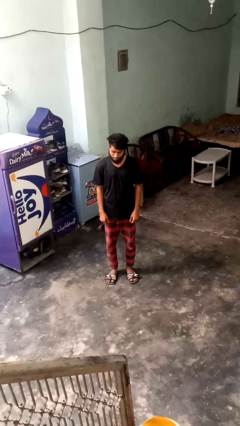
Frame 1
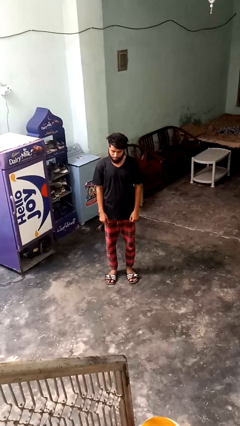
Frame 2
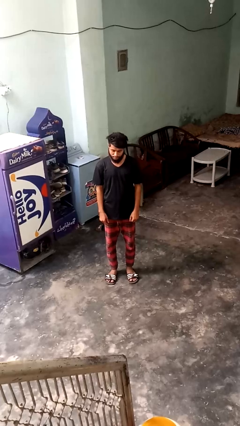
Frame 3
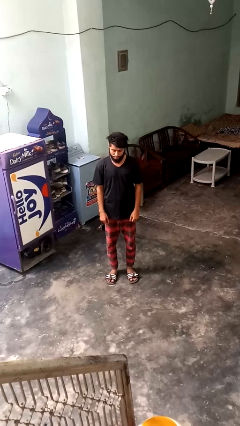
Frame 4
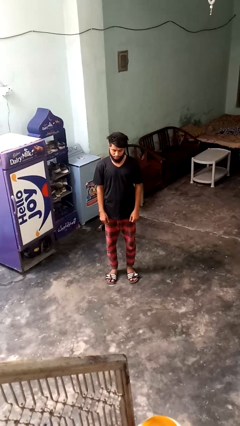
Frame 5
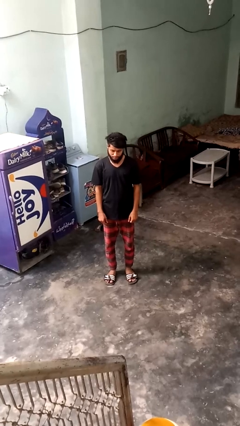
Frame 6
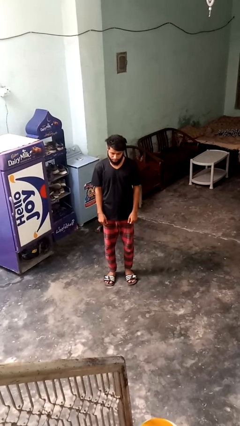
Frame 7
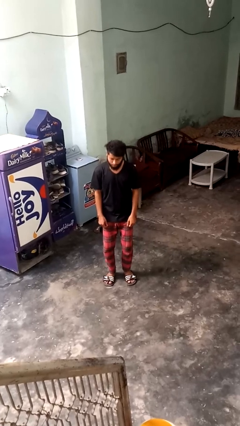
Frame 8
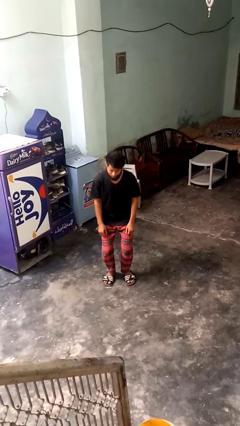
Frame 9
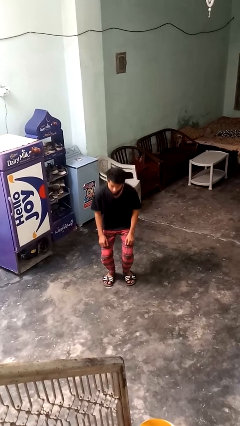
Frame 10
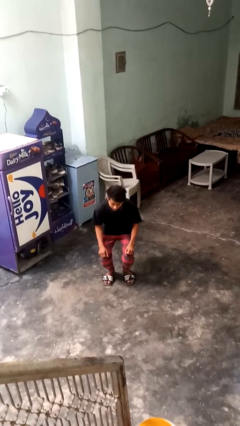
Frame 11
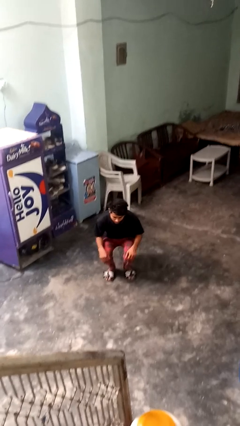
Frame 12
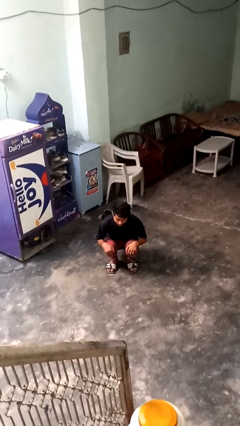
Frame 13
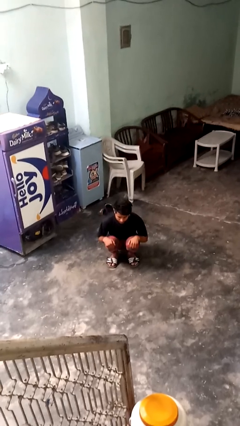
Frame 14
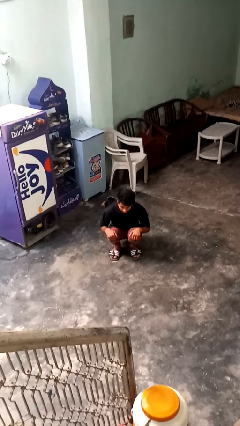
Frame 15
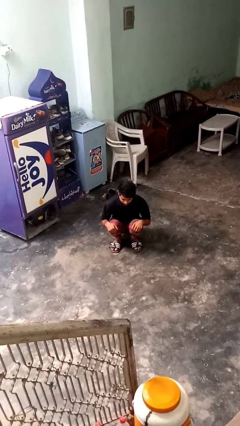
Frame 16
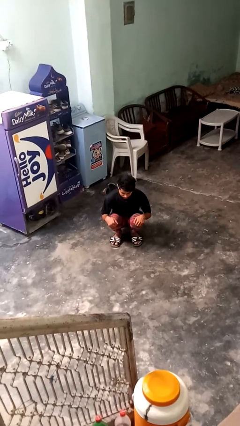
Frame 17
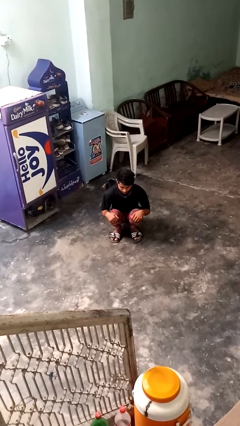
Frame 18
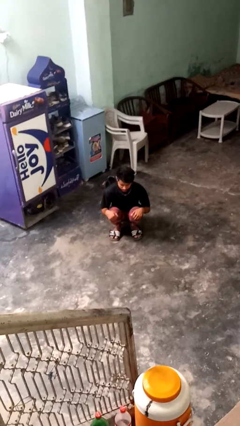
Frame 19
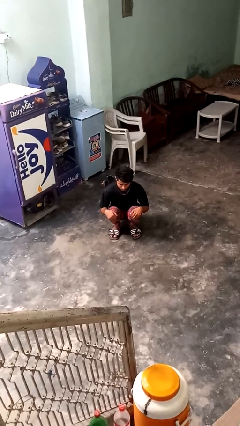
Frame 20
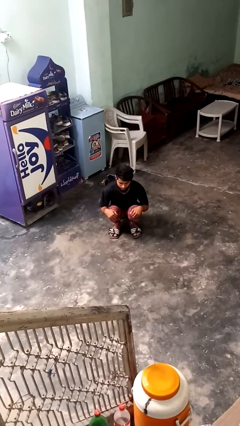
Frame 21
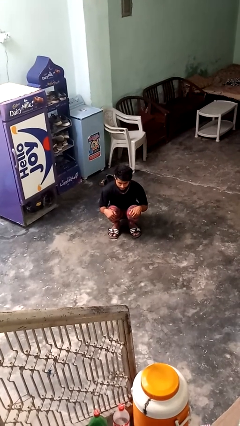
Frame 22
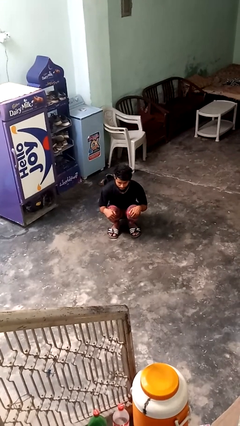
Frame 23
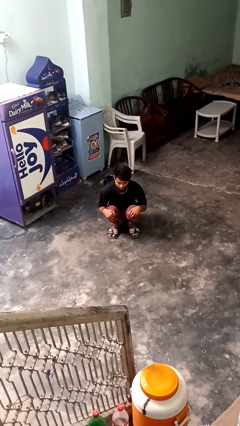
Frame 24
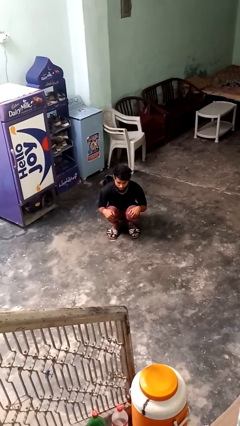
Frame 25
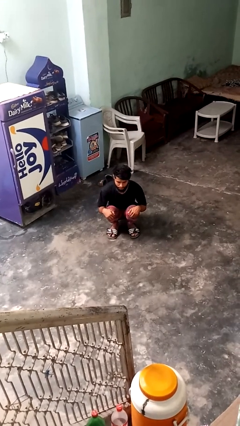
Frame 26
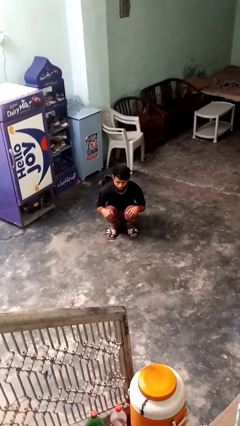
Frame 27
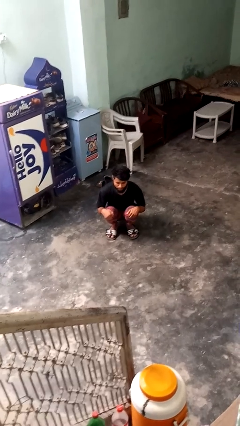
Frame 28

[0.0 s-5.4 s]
person squats

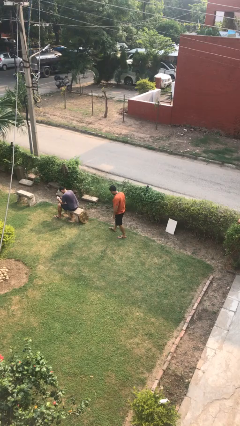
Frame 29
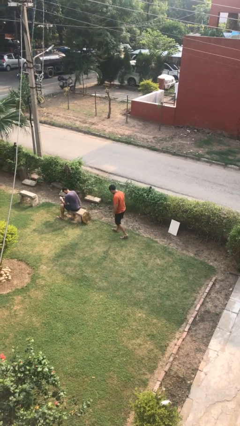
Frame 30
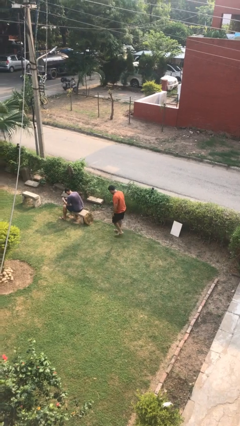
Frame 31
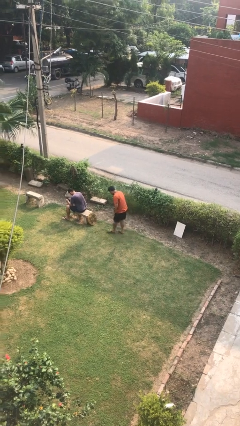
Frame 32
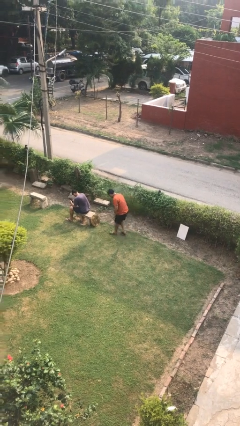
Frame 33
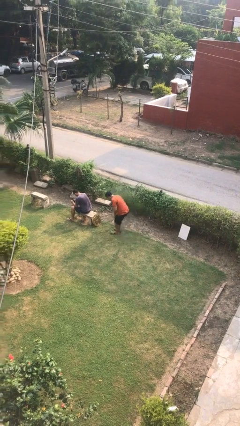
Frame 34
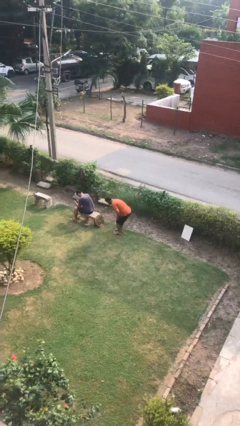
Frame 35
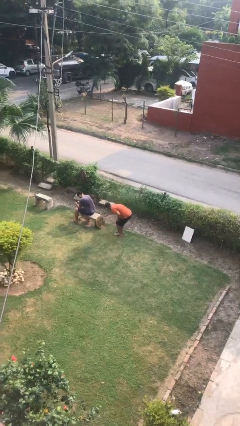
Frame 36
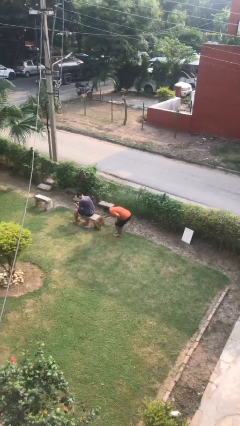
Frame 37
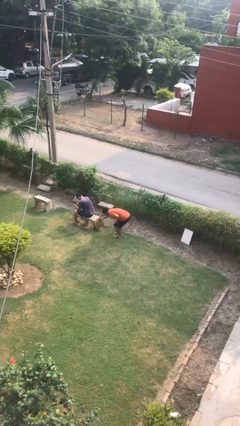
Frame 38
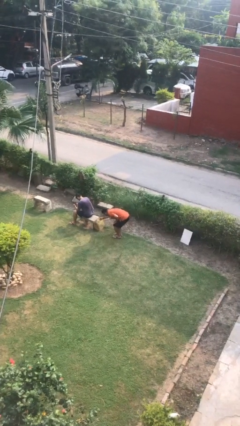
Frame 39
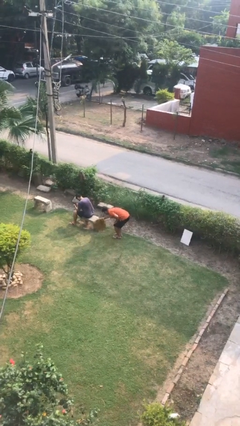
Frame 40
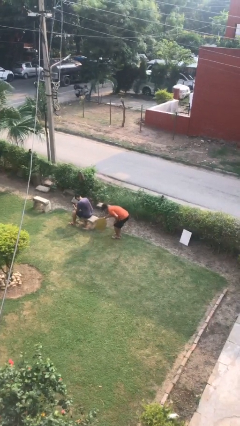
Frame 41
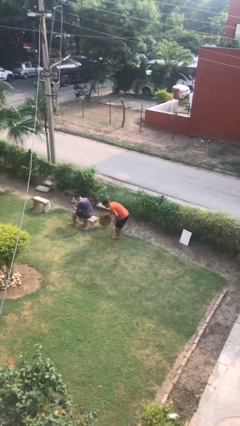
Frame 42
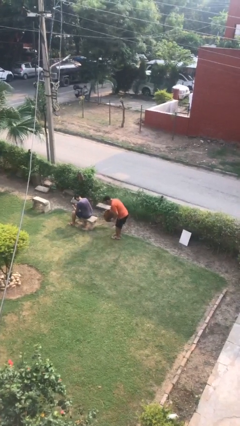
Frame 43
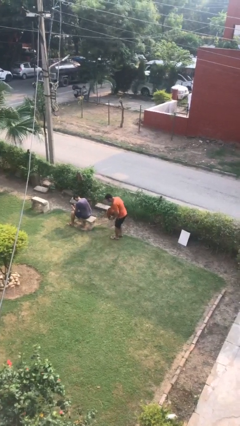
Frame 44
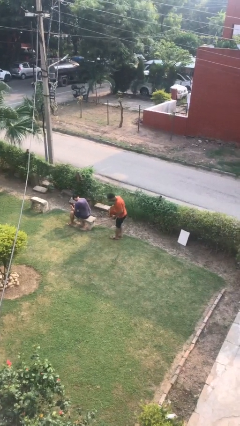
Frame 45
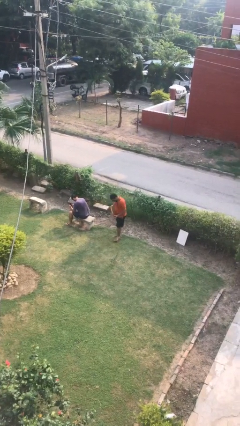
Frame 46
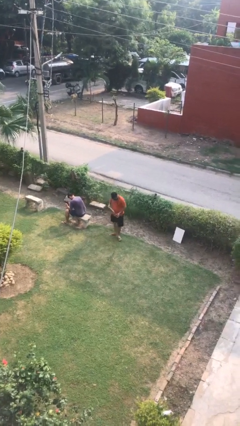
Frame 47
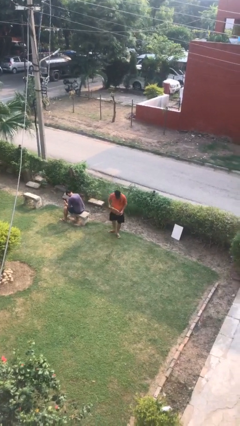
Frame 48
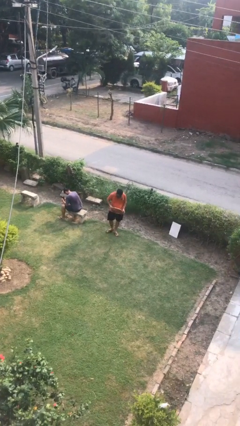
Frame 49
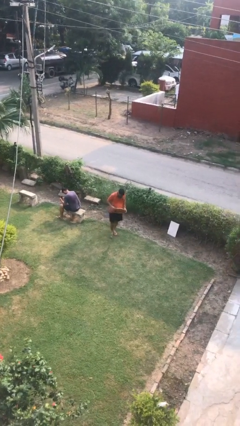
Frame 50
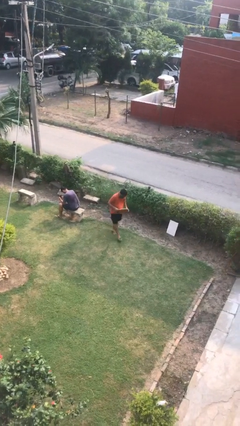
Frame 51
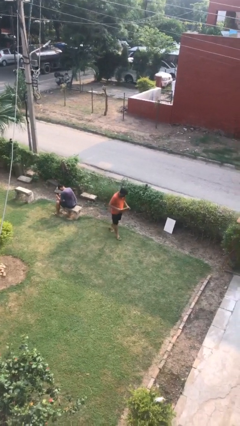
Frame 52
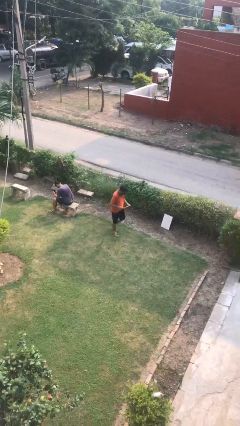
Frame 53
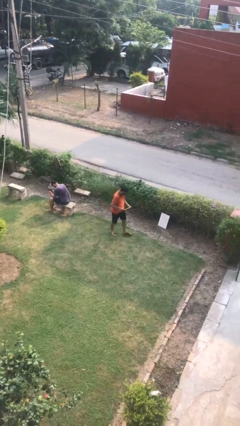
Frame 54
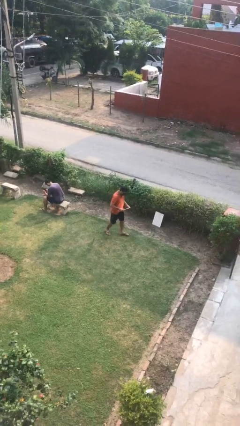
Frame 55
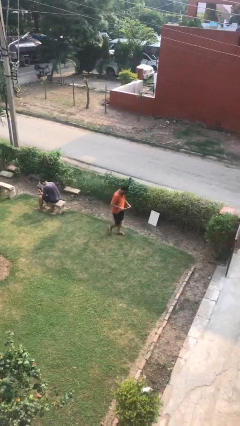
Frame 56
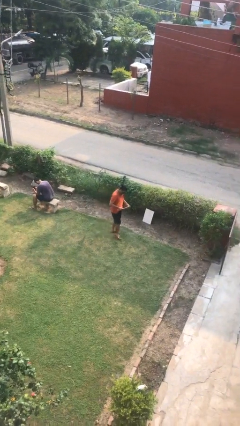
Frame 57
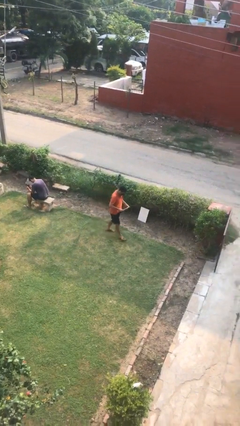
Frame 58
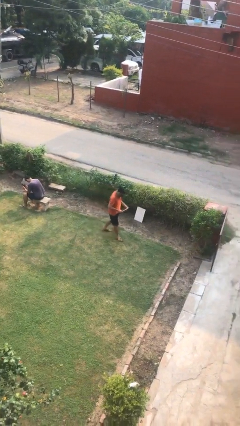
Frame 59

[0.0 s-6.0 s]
person steals object from person

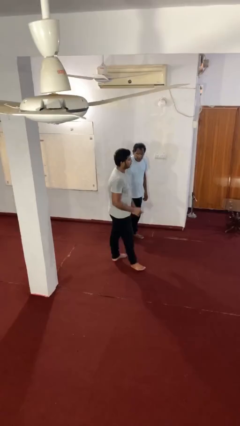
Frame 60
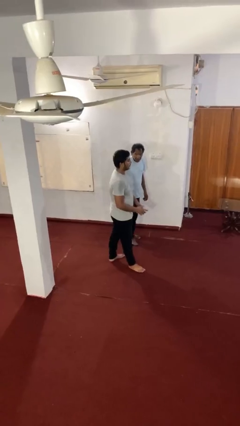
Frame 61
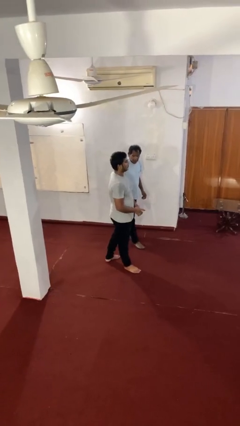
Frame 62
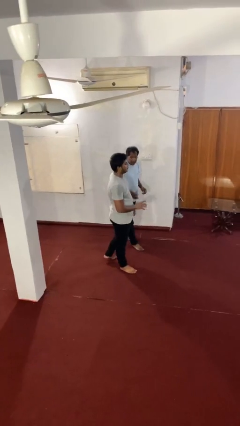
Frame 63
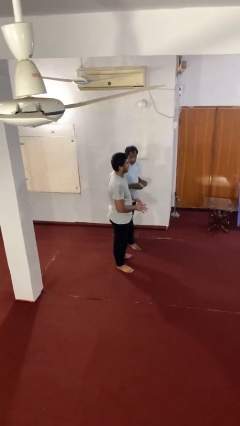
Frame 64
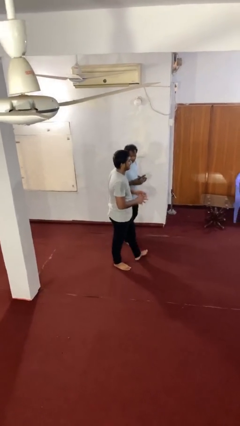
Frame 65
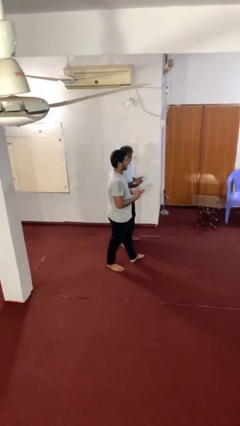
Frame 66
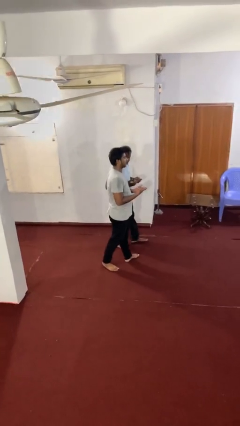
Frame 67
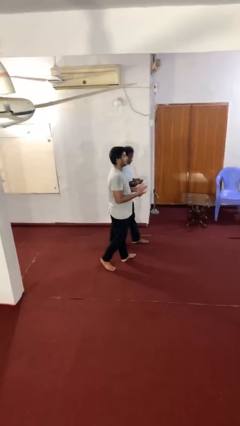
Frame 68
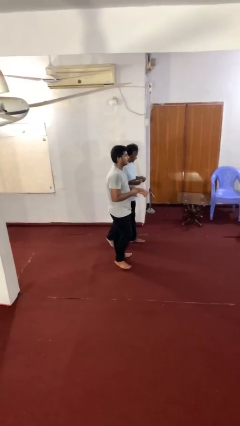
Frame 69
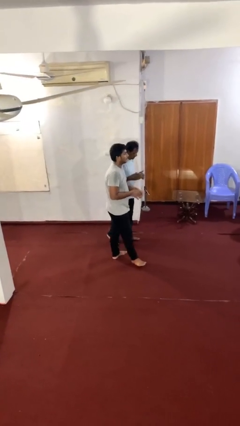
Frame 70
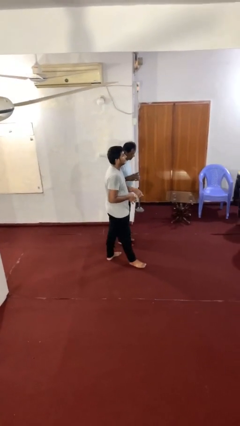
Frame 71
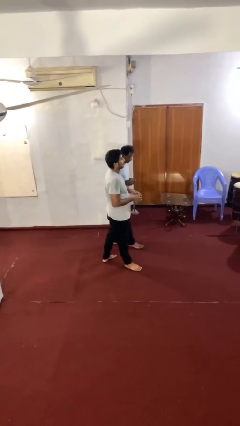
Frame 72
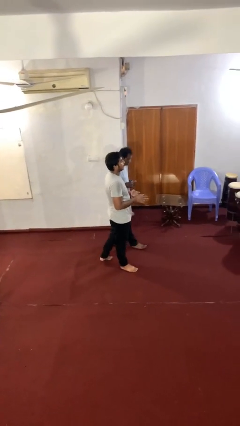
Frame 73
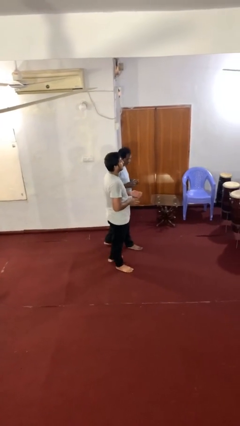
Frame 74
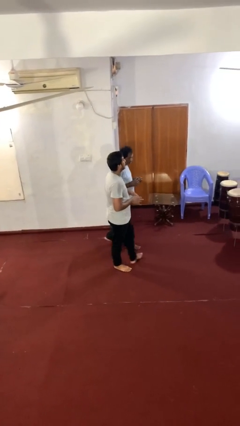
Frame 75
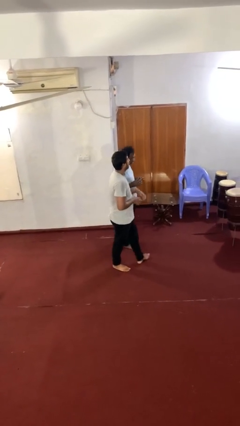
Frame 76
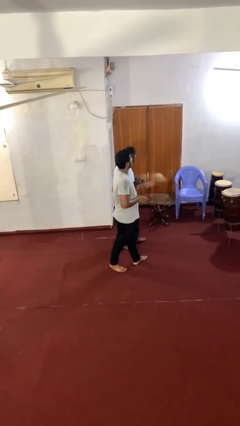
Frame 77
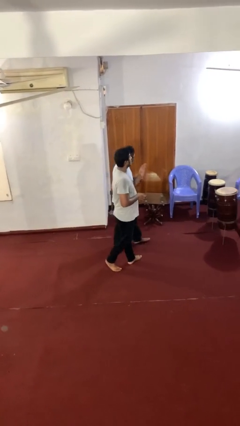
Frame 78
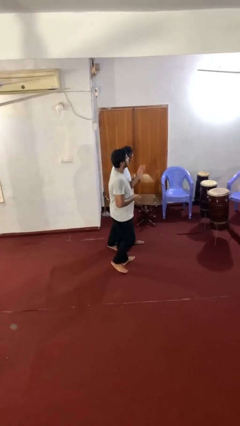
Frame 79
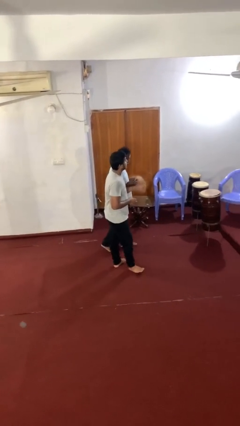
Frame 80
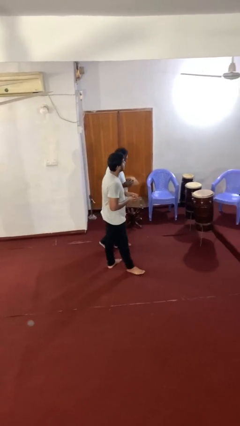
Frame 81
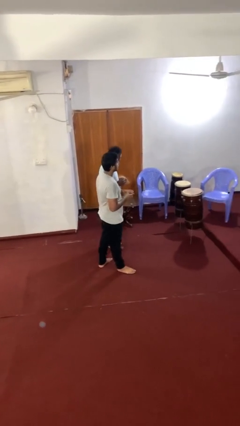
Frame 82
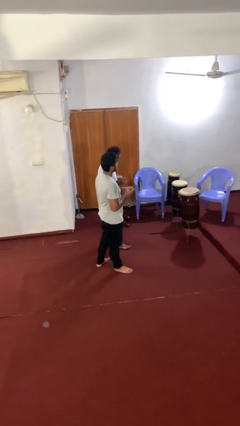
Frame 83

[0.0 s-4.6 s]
person talks to person

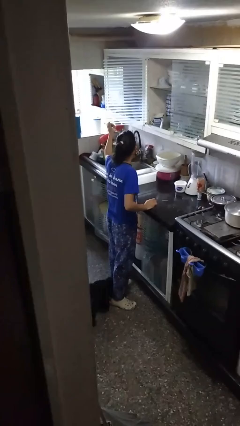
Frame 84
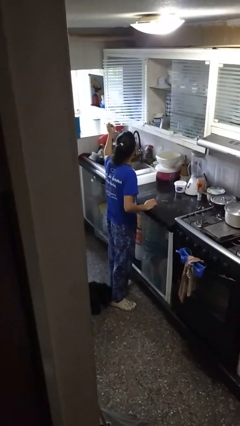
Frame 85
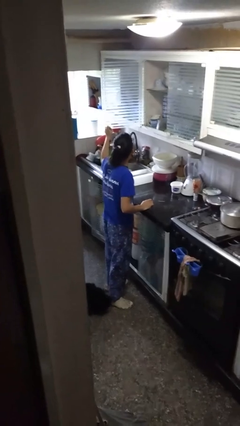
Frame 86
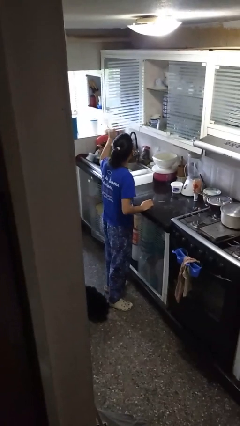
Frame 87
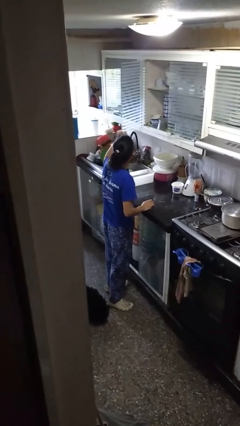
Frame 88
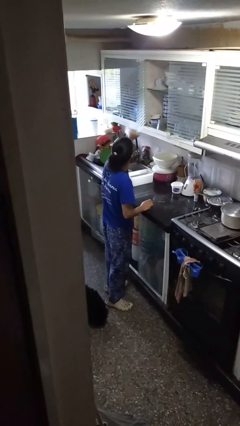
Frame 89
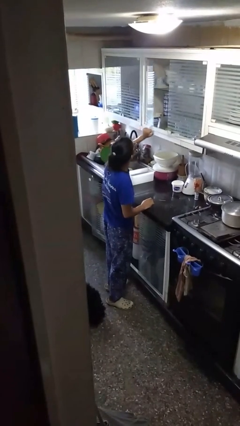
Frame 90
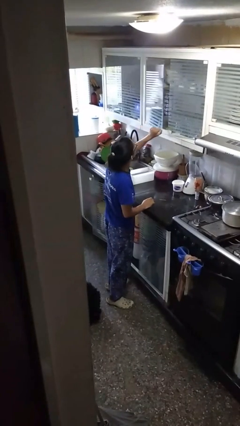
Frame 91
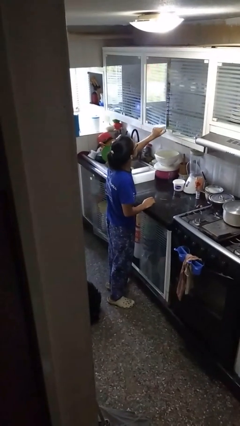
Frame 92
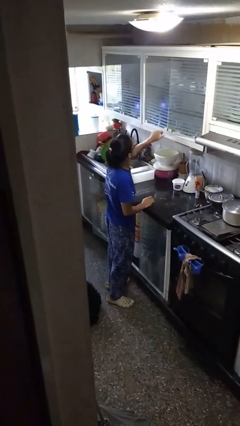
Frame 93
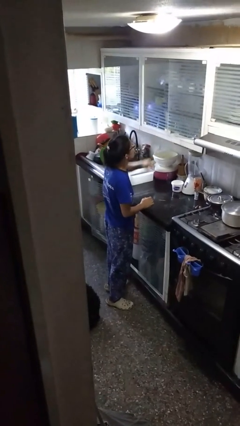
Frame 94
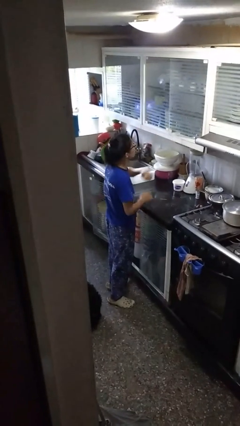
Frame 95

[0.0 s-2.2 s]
person closes cabinet
